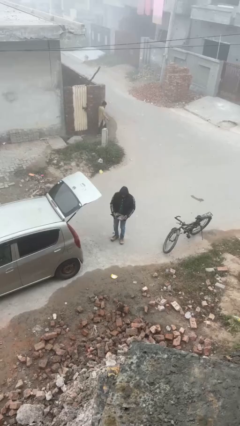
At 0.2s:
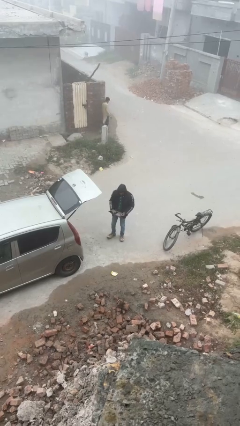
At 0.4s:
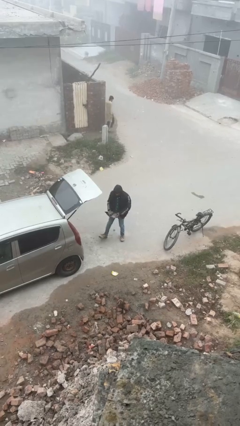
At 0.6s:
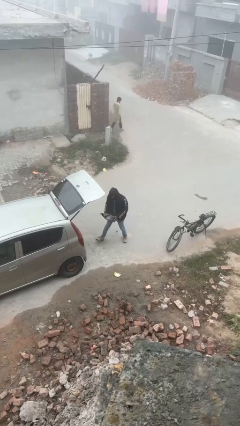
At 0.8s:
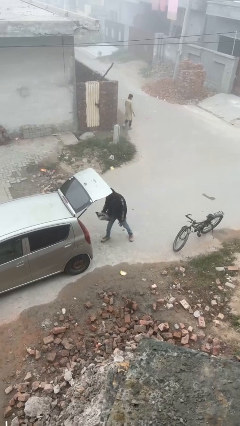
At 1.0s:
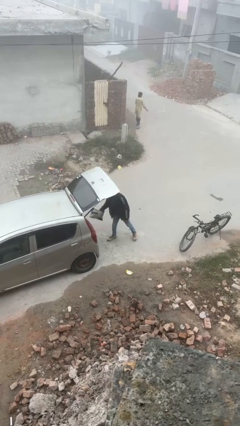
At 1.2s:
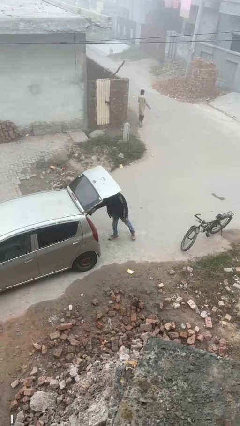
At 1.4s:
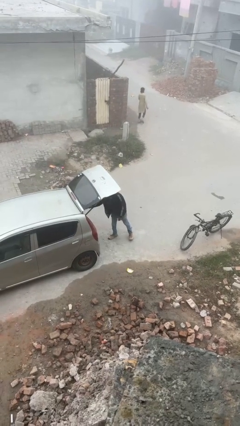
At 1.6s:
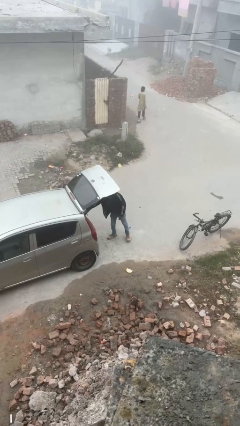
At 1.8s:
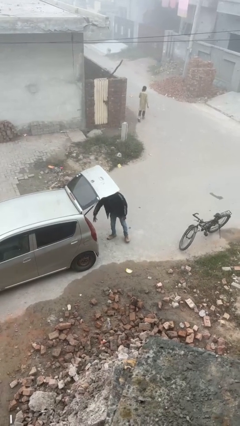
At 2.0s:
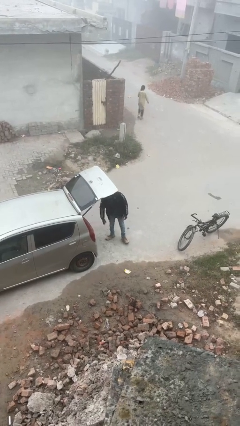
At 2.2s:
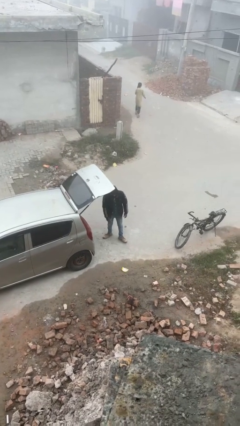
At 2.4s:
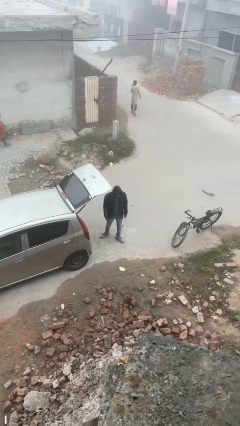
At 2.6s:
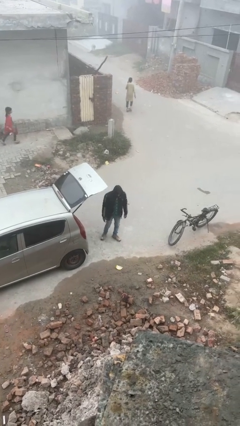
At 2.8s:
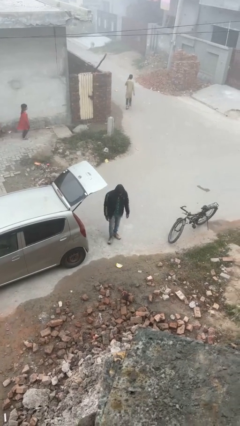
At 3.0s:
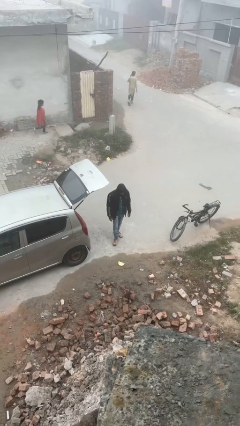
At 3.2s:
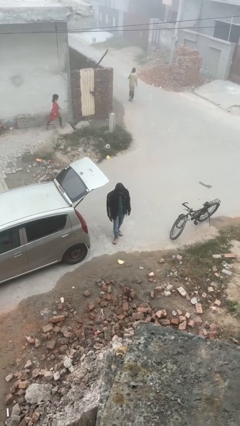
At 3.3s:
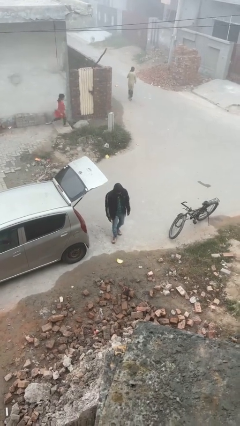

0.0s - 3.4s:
person loads car

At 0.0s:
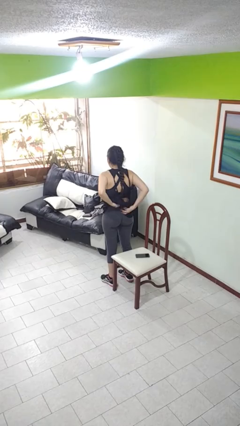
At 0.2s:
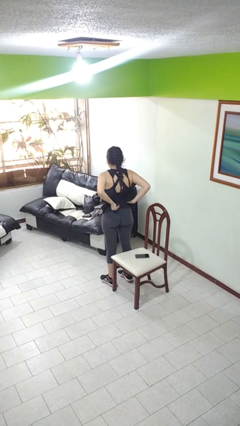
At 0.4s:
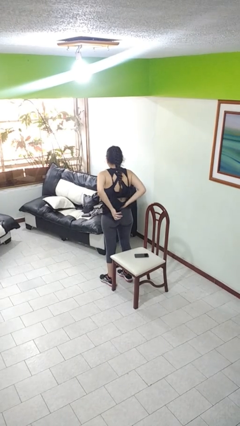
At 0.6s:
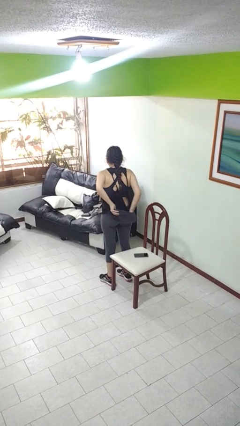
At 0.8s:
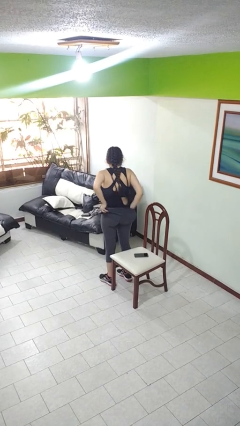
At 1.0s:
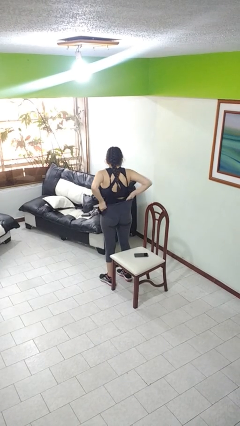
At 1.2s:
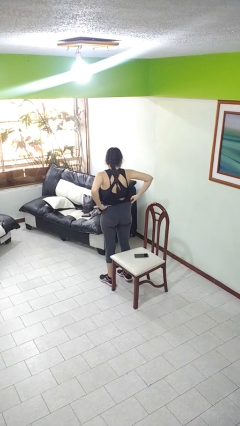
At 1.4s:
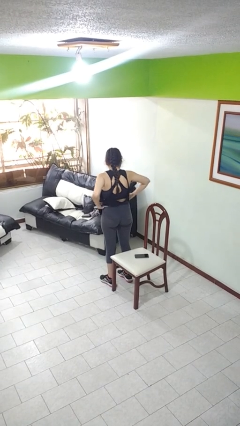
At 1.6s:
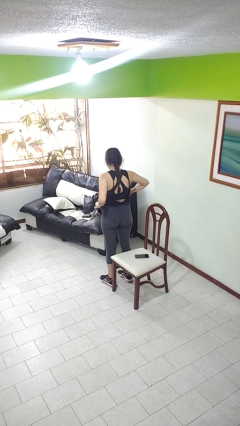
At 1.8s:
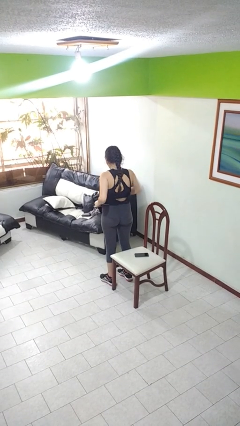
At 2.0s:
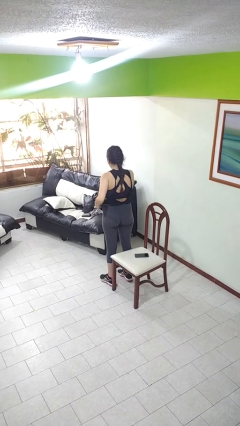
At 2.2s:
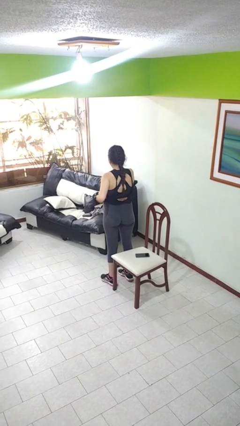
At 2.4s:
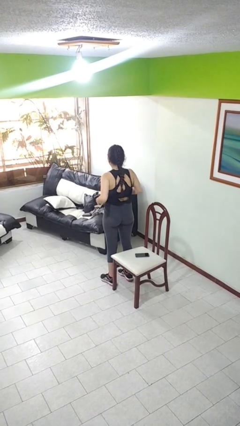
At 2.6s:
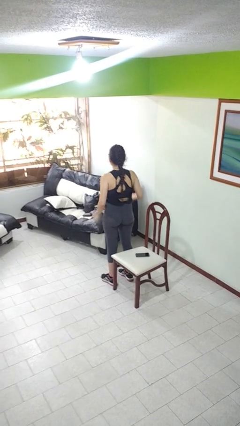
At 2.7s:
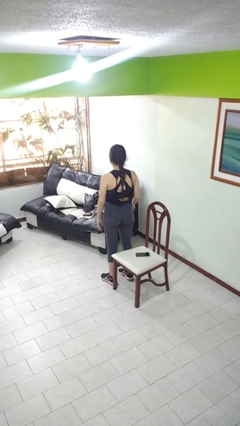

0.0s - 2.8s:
person tucks in shirt

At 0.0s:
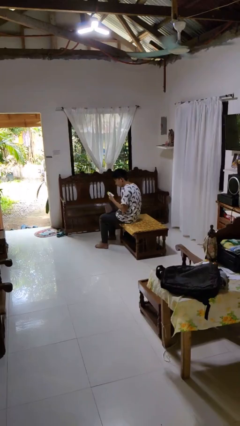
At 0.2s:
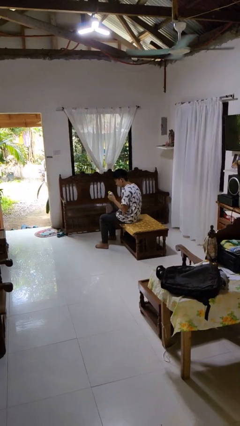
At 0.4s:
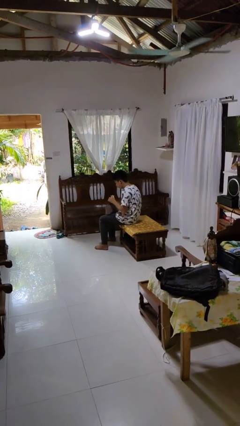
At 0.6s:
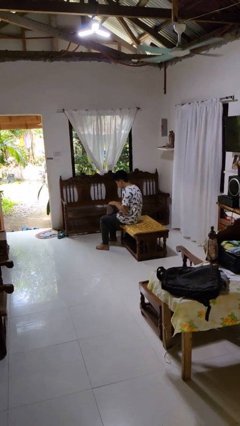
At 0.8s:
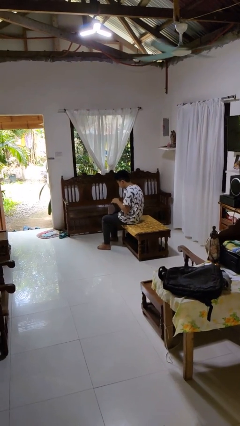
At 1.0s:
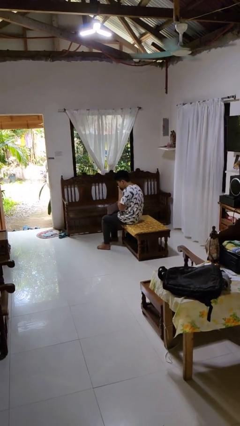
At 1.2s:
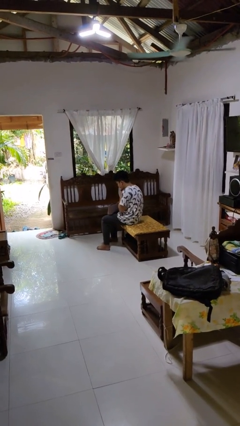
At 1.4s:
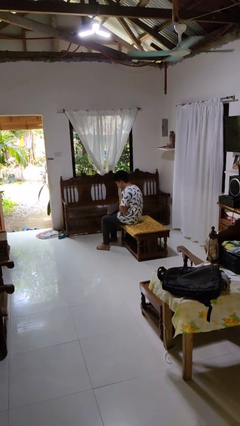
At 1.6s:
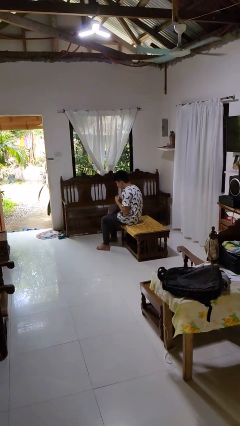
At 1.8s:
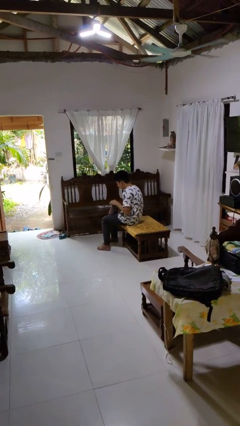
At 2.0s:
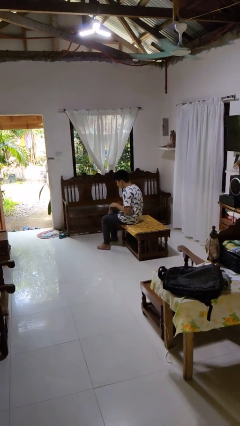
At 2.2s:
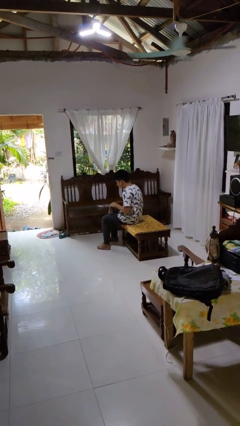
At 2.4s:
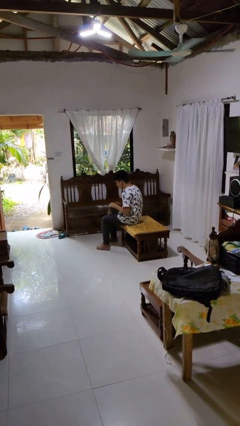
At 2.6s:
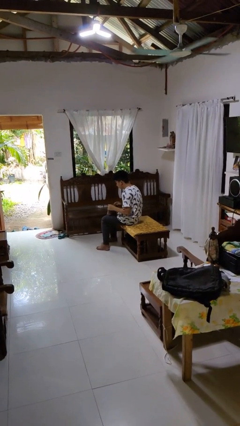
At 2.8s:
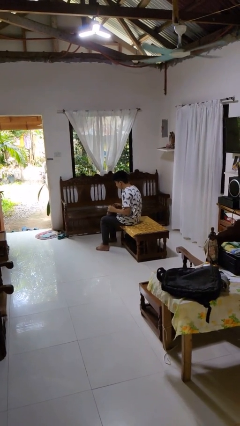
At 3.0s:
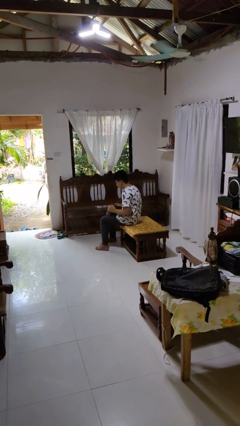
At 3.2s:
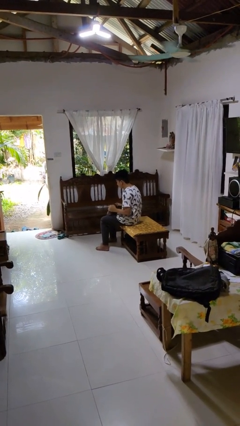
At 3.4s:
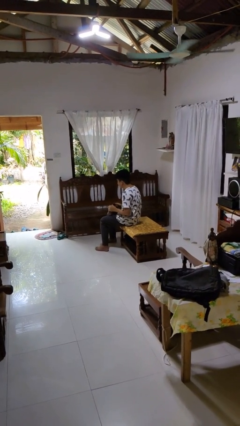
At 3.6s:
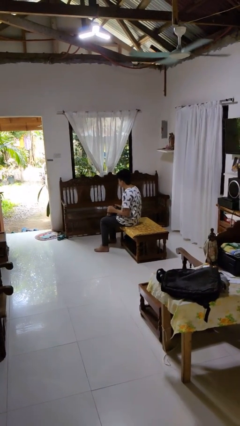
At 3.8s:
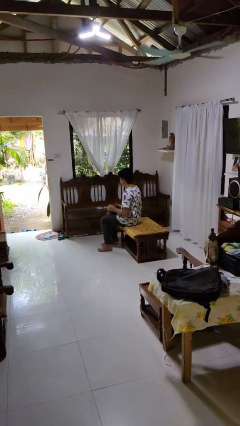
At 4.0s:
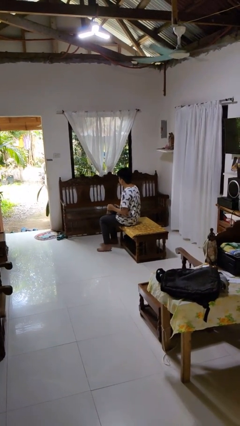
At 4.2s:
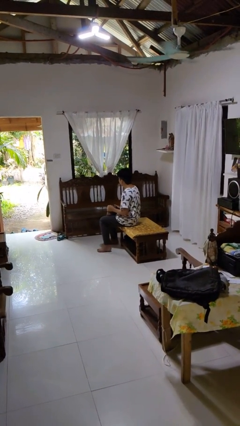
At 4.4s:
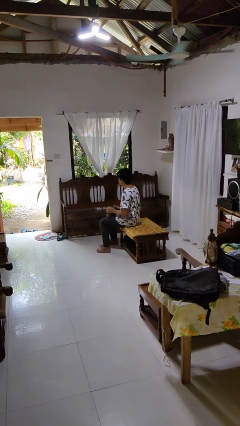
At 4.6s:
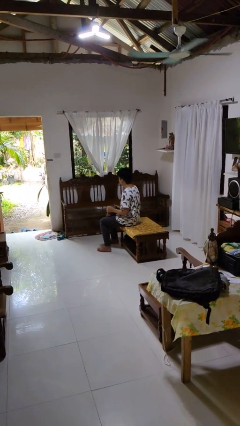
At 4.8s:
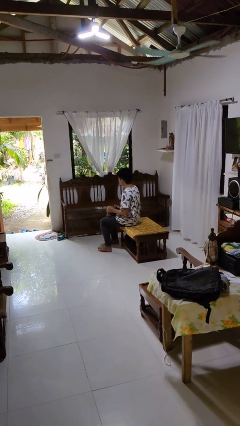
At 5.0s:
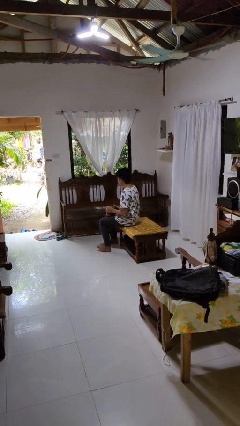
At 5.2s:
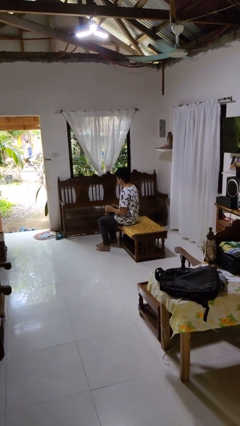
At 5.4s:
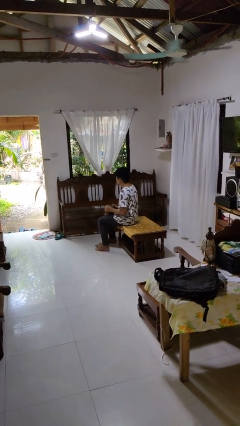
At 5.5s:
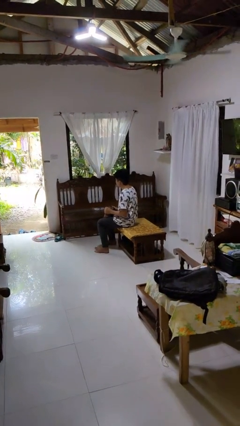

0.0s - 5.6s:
person puts object into purse

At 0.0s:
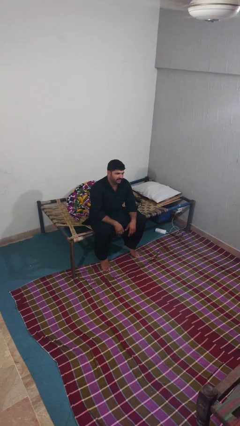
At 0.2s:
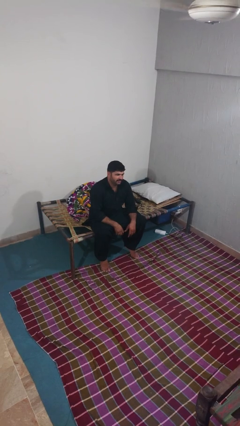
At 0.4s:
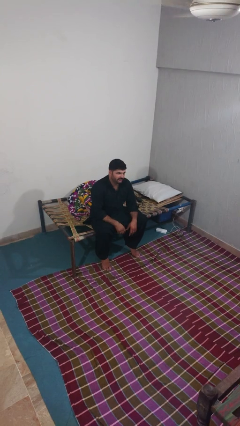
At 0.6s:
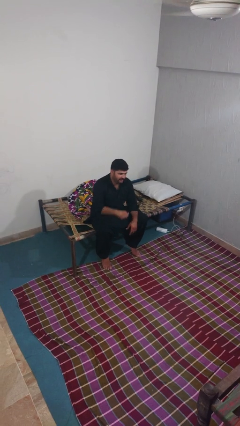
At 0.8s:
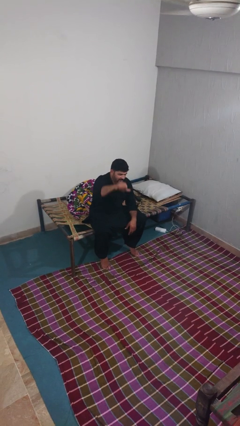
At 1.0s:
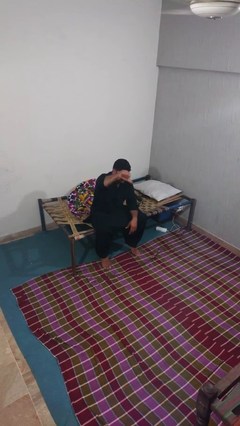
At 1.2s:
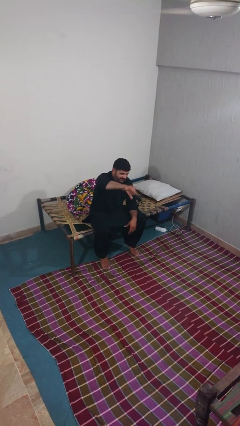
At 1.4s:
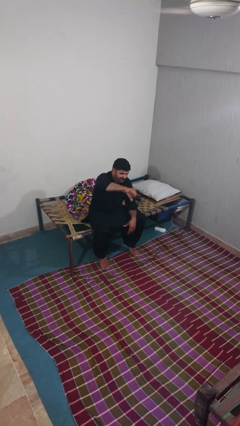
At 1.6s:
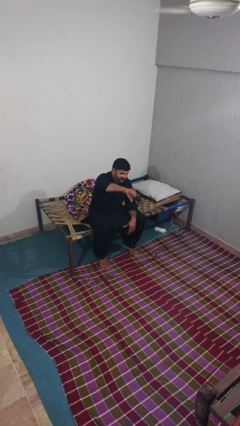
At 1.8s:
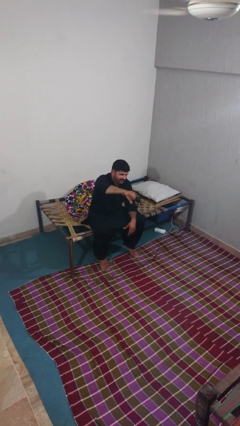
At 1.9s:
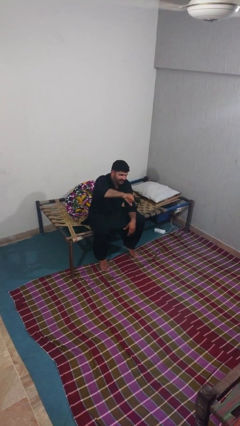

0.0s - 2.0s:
person gestures thumbs down

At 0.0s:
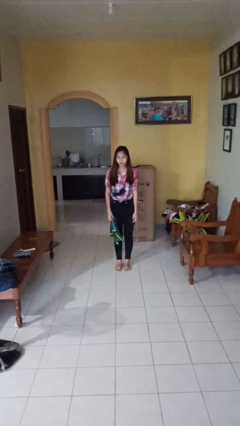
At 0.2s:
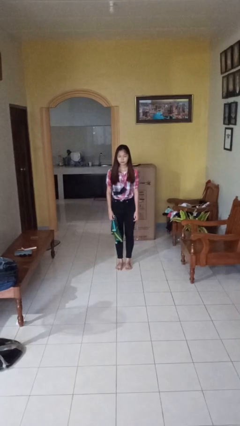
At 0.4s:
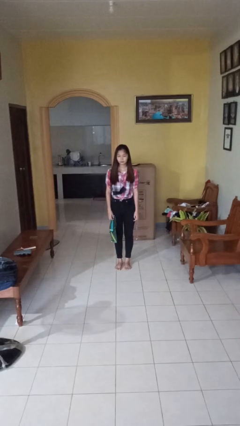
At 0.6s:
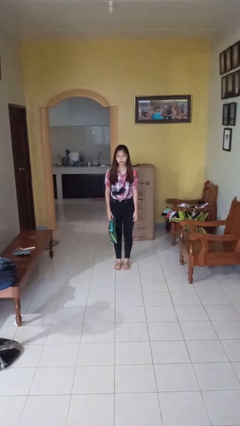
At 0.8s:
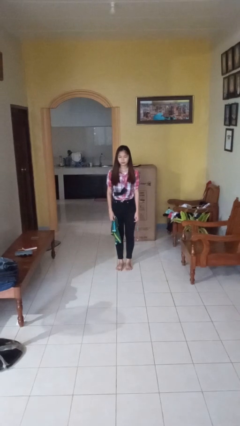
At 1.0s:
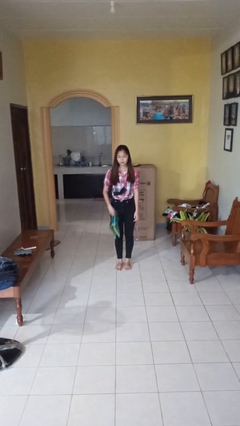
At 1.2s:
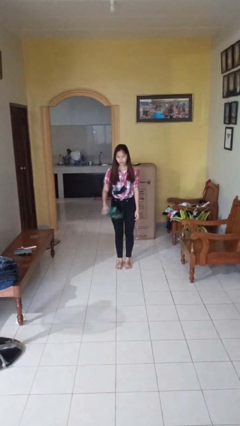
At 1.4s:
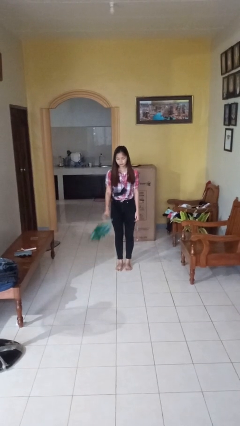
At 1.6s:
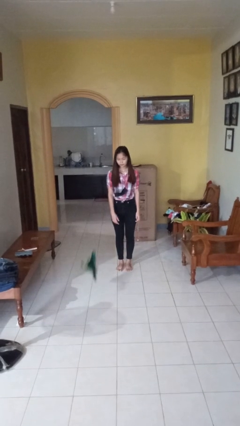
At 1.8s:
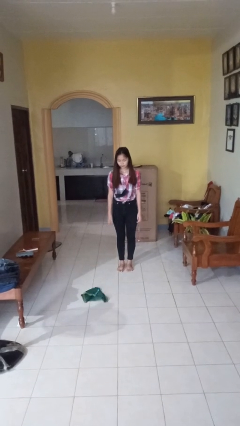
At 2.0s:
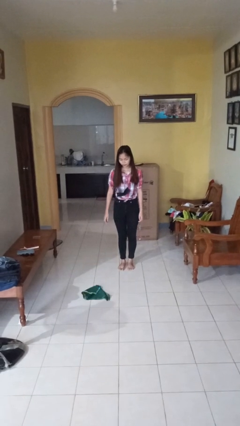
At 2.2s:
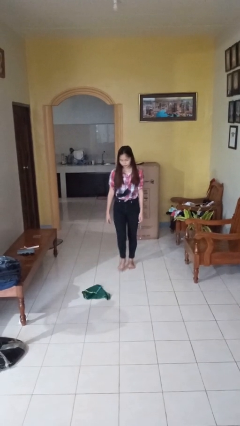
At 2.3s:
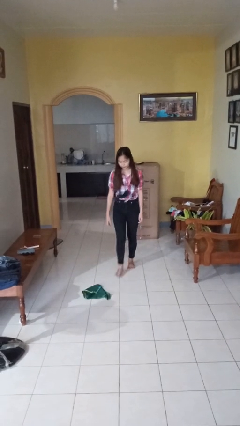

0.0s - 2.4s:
person throws object into air

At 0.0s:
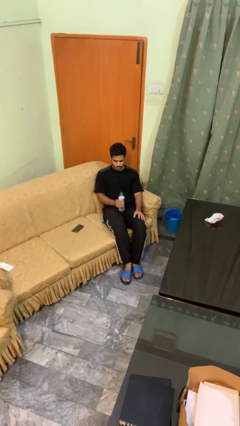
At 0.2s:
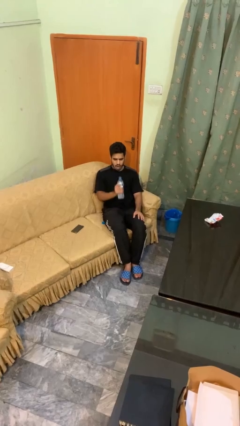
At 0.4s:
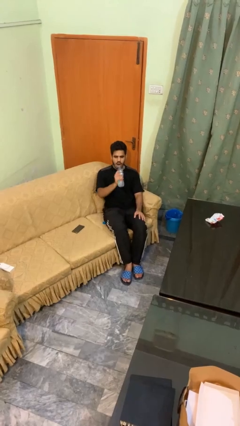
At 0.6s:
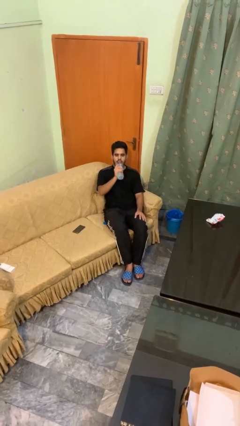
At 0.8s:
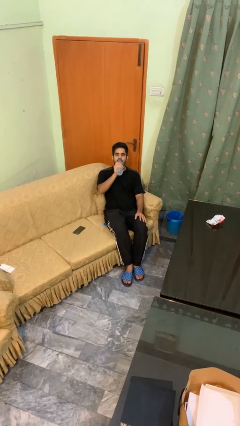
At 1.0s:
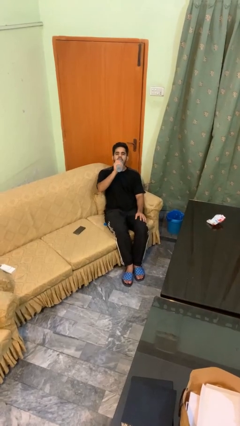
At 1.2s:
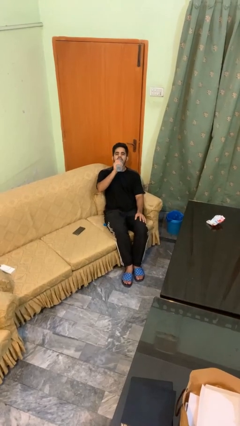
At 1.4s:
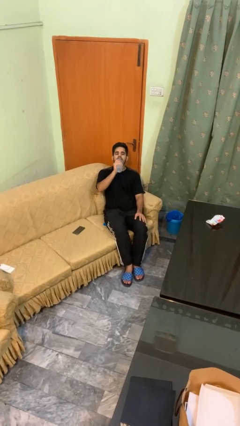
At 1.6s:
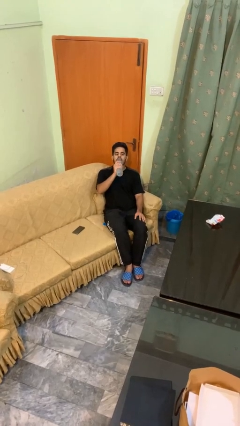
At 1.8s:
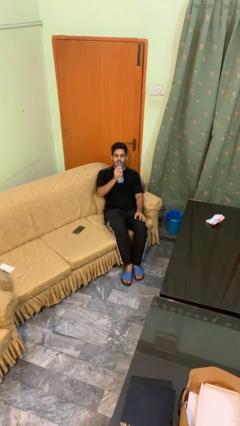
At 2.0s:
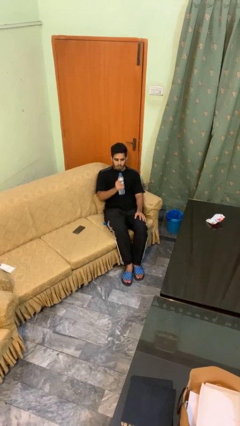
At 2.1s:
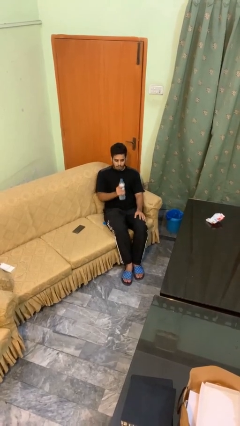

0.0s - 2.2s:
person drinks from bottle
